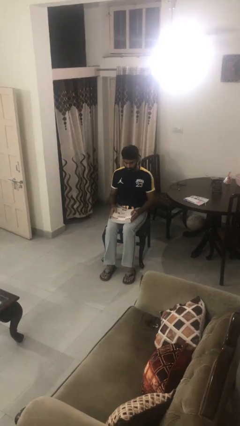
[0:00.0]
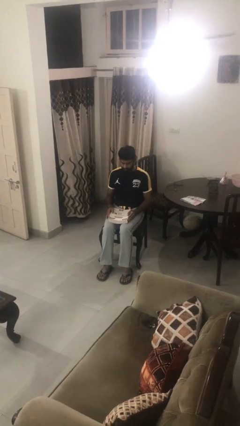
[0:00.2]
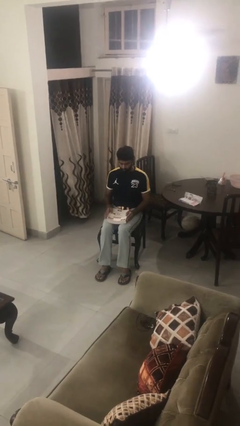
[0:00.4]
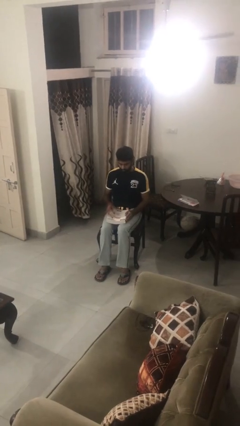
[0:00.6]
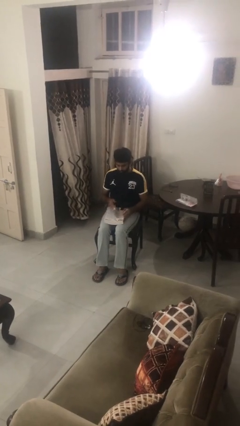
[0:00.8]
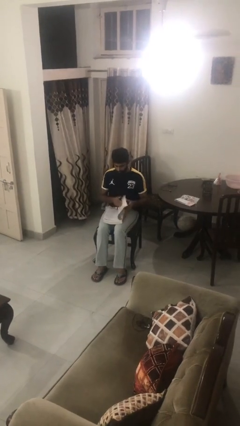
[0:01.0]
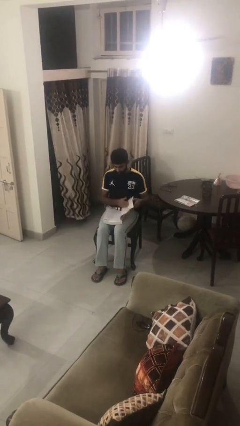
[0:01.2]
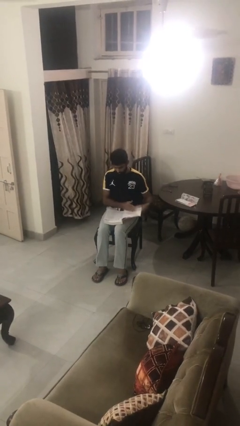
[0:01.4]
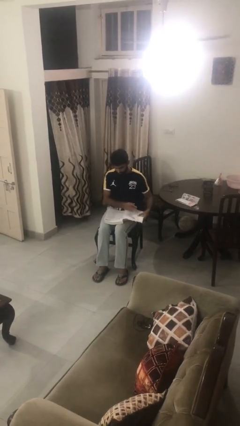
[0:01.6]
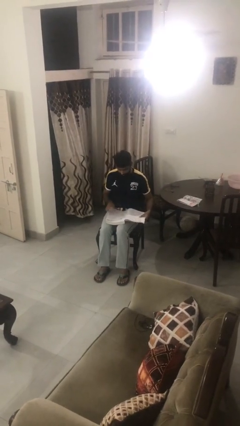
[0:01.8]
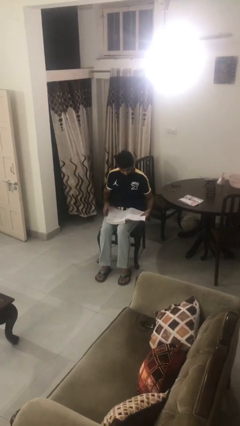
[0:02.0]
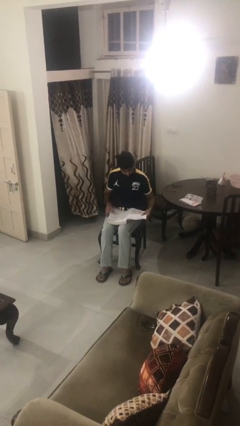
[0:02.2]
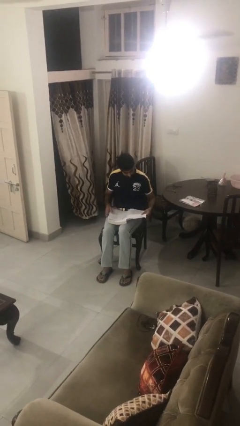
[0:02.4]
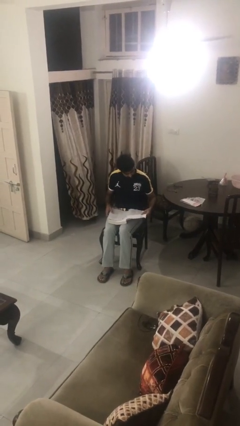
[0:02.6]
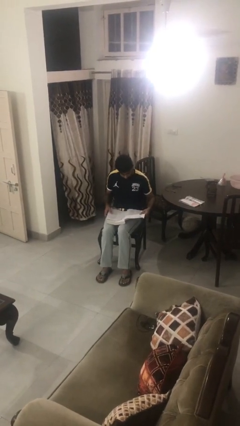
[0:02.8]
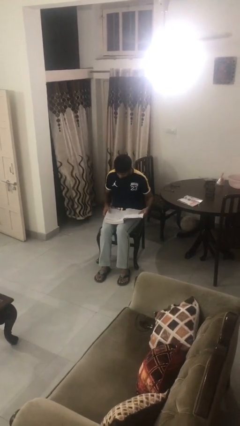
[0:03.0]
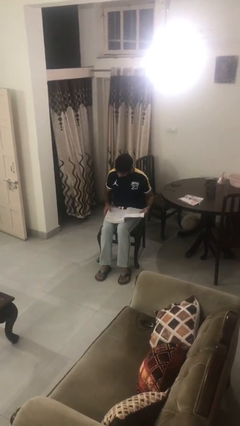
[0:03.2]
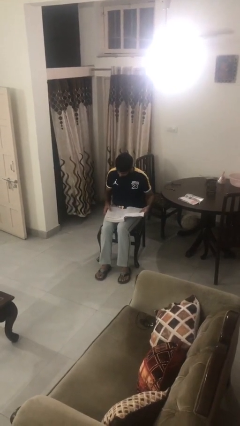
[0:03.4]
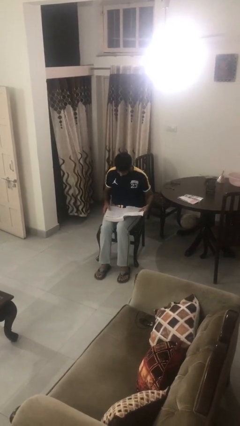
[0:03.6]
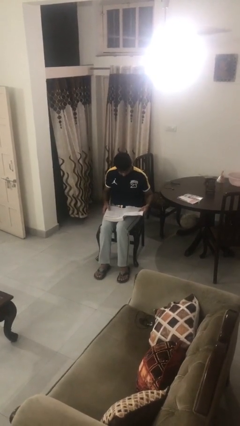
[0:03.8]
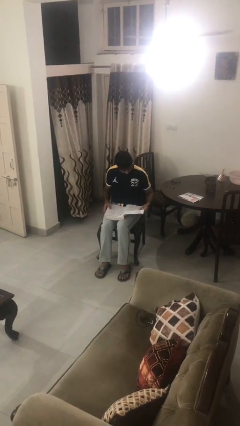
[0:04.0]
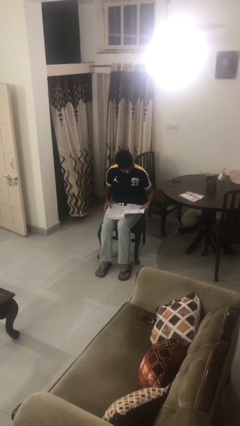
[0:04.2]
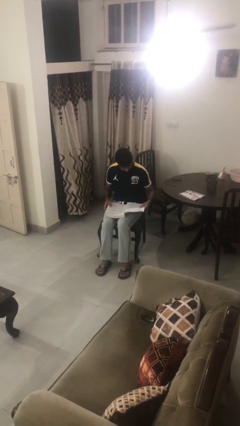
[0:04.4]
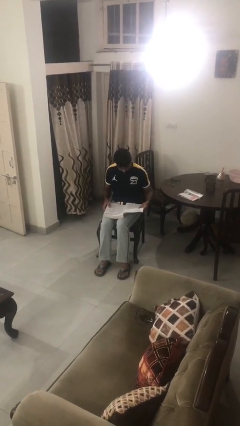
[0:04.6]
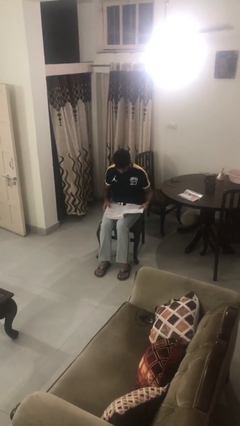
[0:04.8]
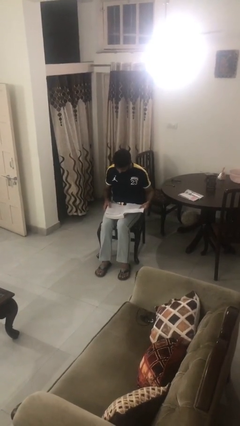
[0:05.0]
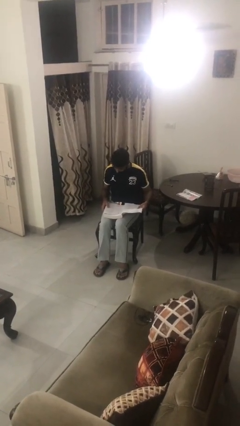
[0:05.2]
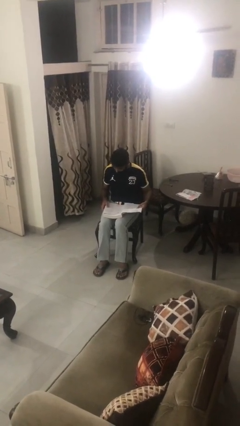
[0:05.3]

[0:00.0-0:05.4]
person reads book

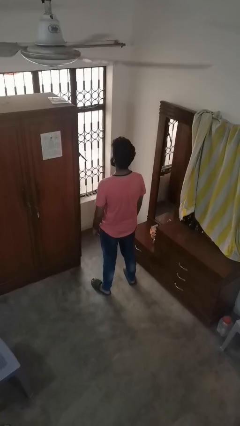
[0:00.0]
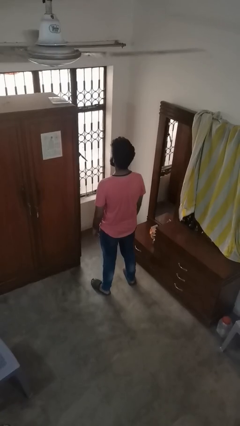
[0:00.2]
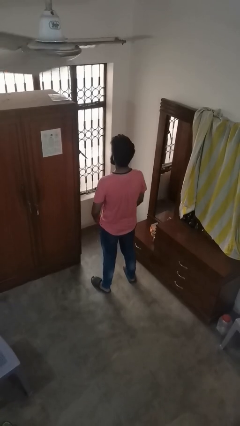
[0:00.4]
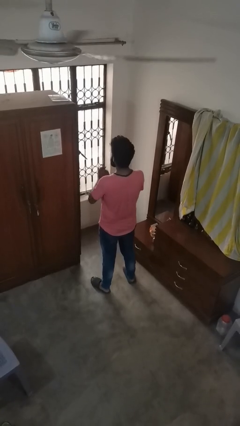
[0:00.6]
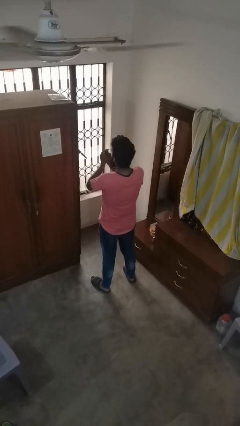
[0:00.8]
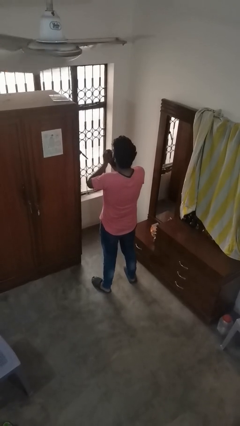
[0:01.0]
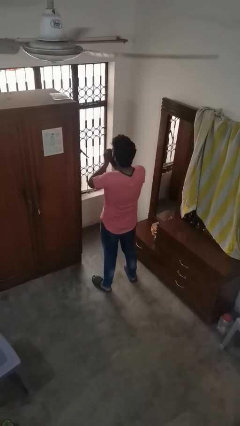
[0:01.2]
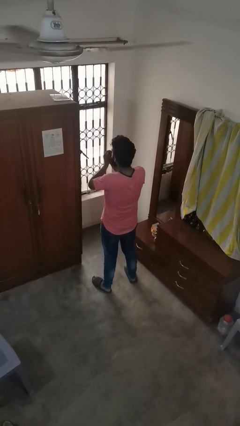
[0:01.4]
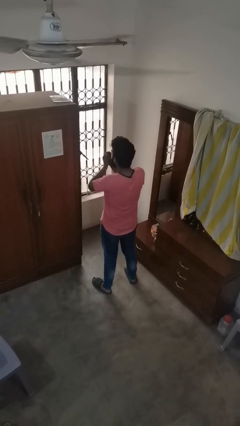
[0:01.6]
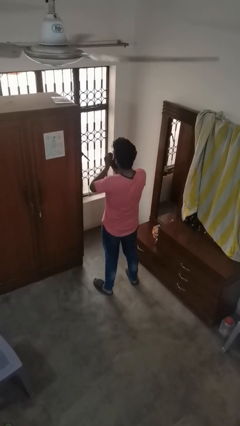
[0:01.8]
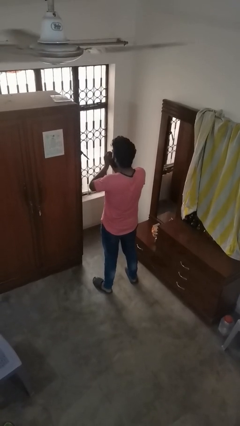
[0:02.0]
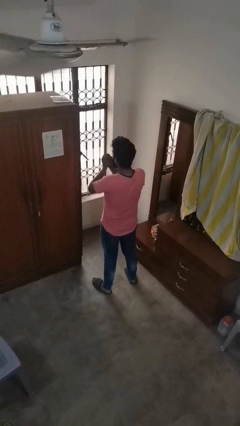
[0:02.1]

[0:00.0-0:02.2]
person blows into hands

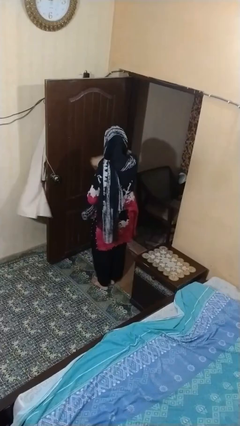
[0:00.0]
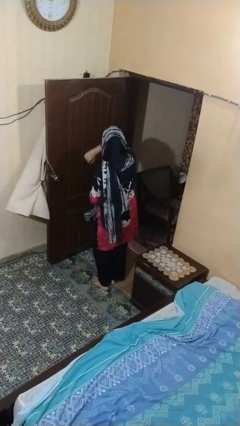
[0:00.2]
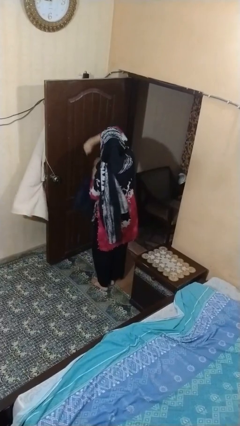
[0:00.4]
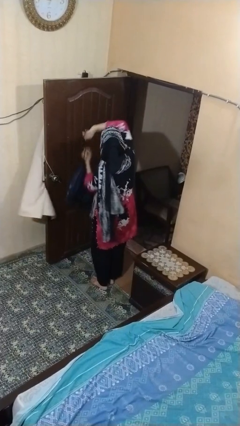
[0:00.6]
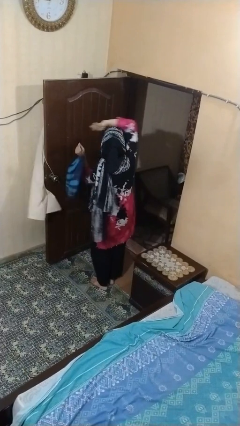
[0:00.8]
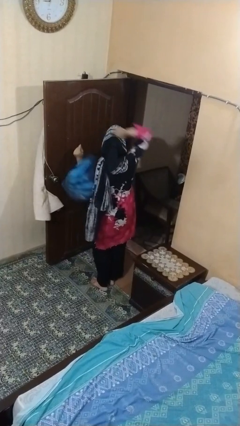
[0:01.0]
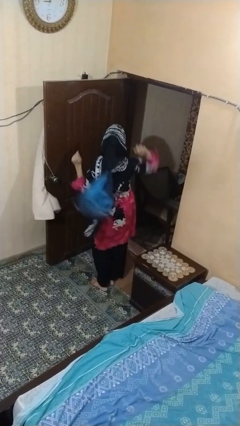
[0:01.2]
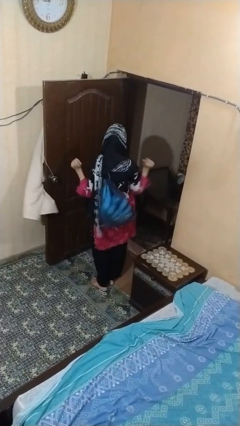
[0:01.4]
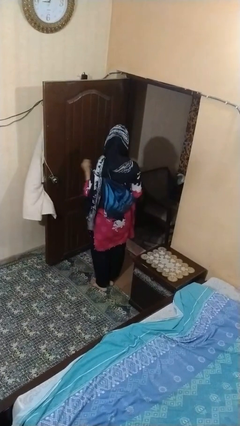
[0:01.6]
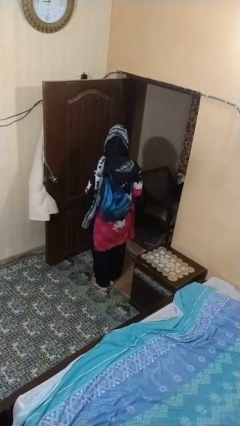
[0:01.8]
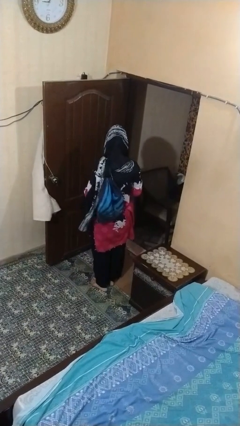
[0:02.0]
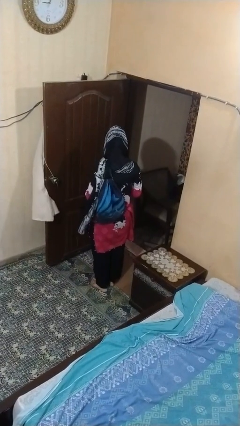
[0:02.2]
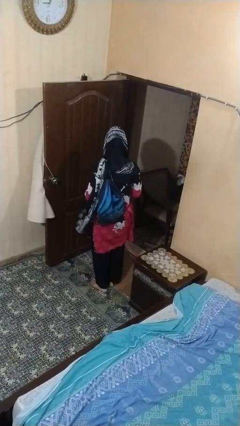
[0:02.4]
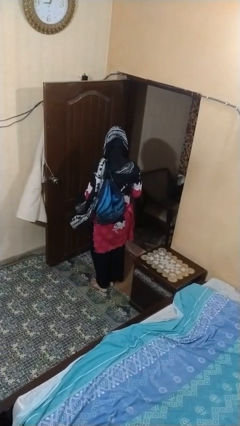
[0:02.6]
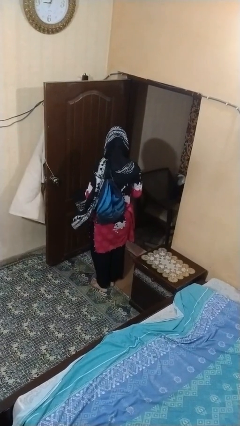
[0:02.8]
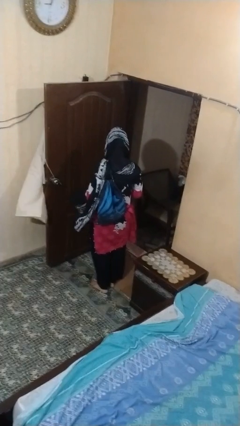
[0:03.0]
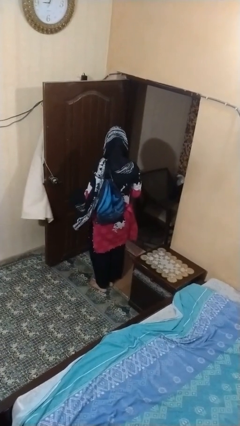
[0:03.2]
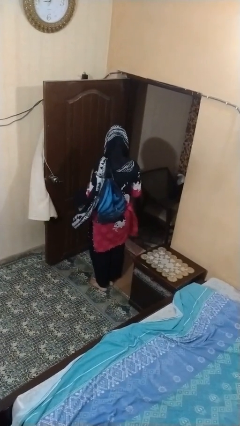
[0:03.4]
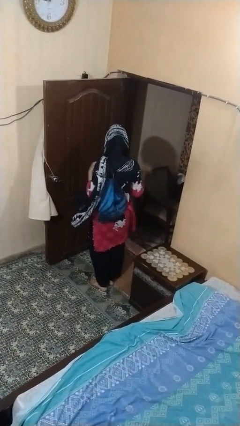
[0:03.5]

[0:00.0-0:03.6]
person puts on backpack

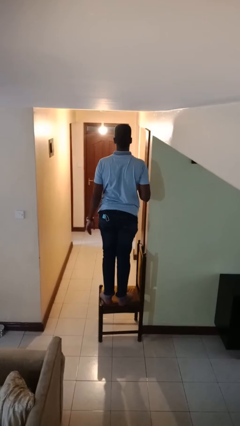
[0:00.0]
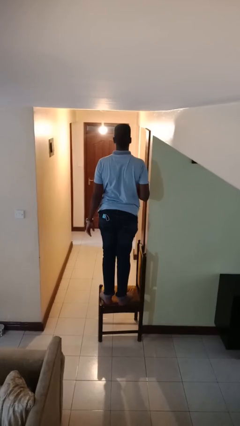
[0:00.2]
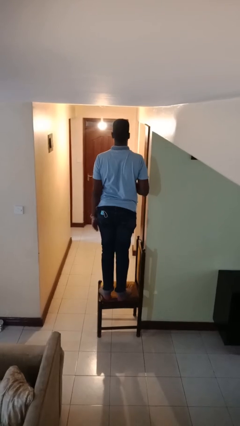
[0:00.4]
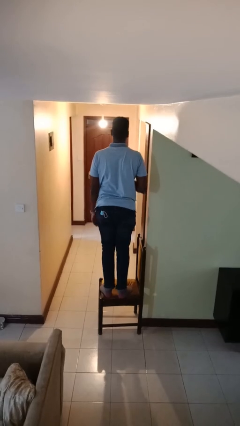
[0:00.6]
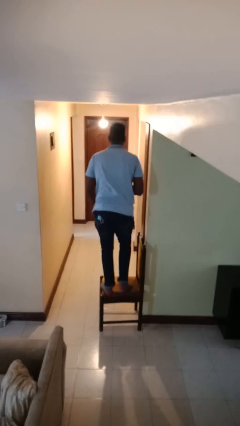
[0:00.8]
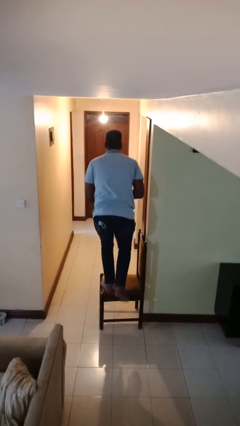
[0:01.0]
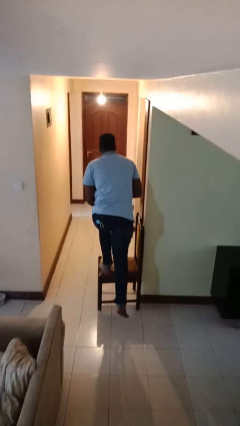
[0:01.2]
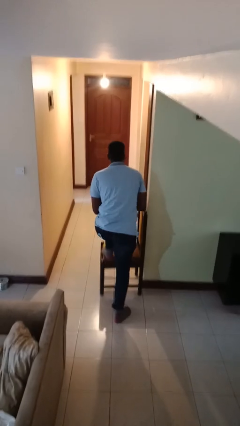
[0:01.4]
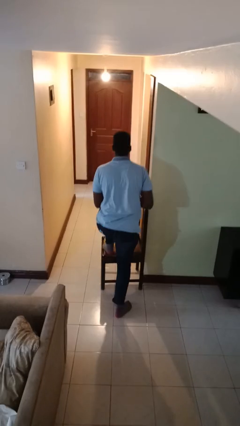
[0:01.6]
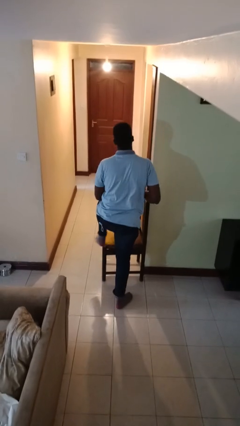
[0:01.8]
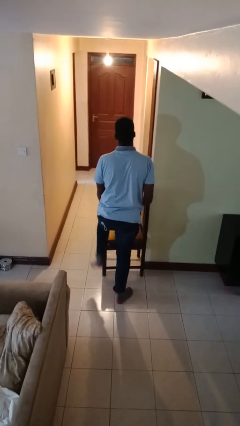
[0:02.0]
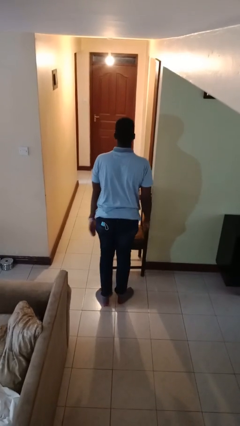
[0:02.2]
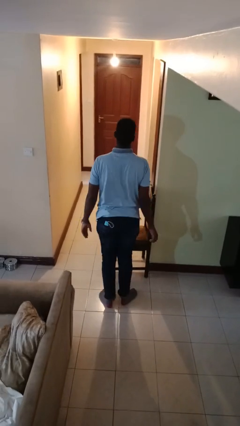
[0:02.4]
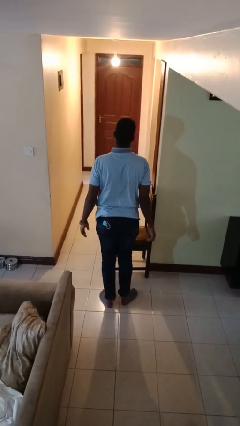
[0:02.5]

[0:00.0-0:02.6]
person climbs off chair

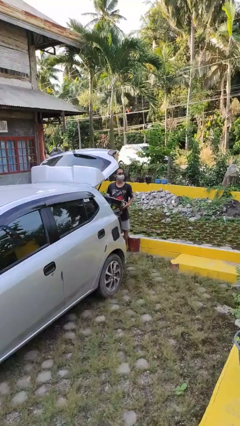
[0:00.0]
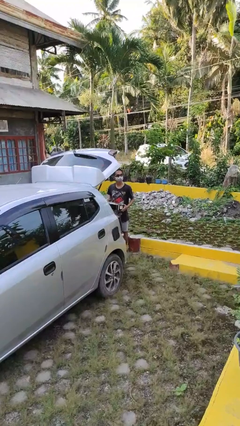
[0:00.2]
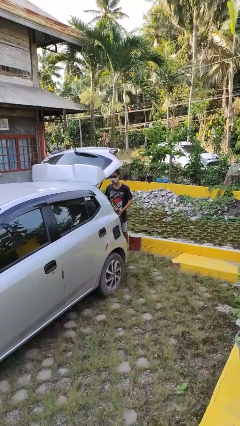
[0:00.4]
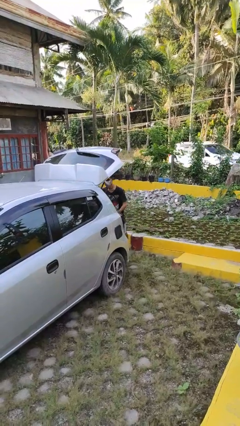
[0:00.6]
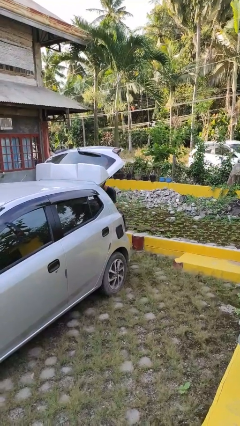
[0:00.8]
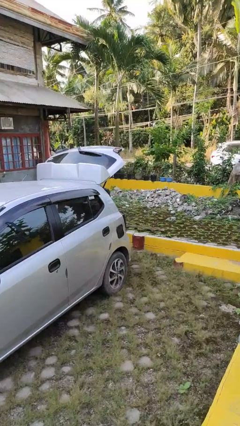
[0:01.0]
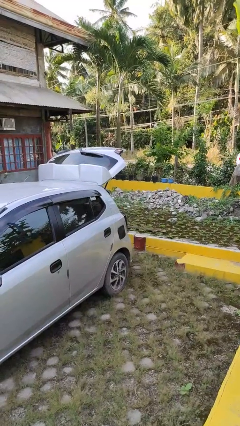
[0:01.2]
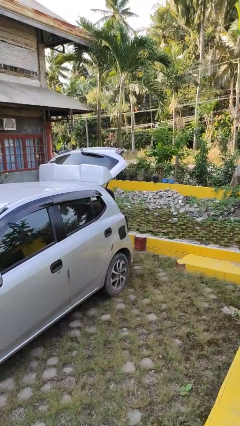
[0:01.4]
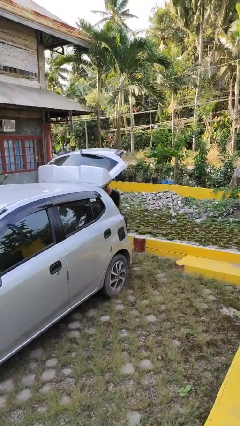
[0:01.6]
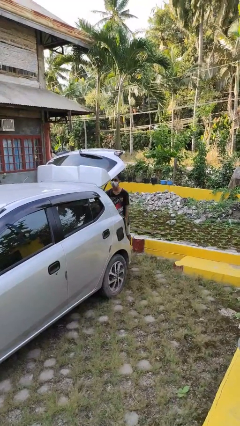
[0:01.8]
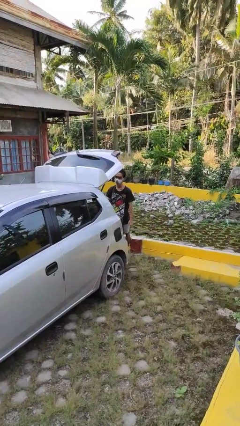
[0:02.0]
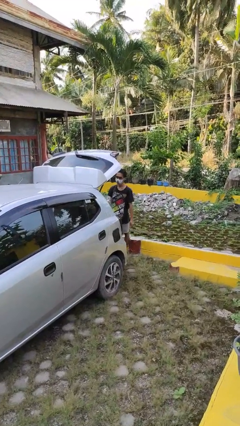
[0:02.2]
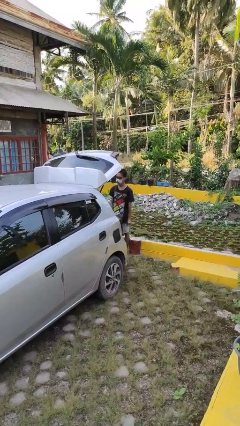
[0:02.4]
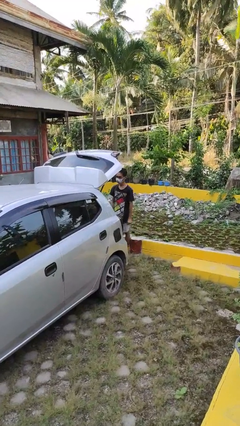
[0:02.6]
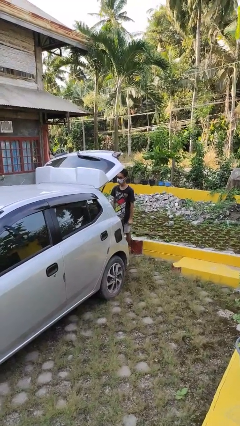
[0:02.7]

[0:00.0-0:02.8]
person loads car

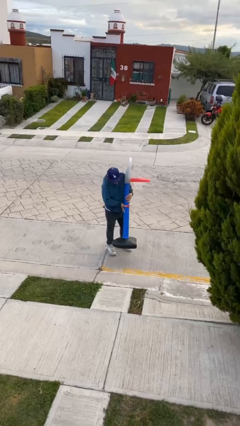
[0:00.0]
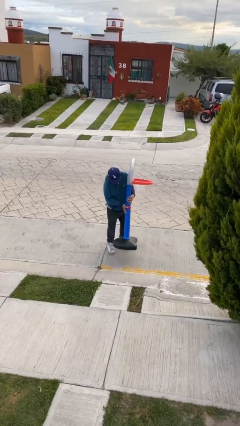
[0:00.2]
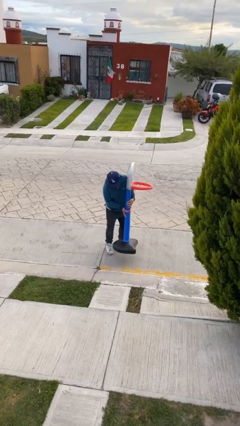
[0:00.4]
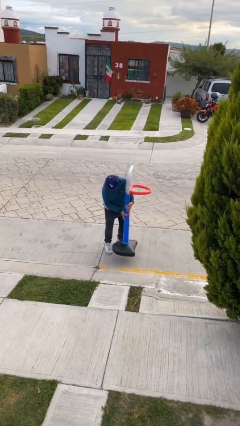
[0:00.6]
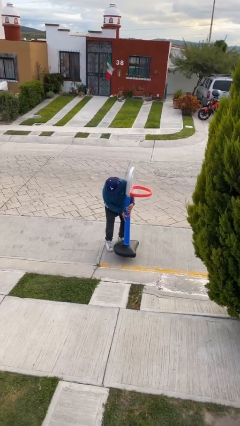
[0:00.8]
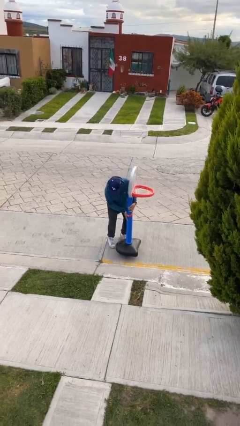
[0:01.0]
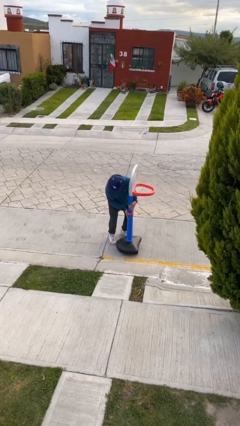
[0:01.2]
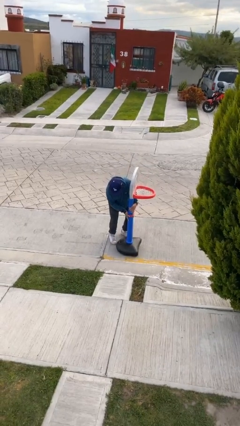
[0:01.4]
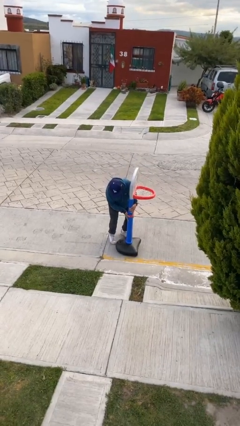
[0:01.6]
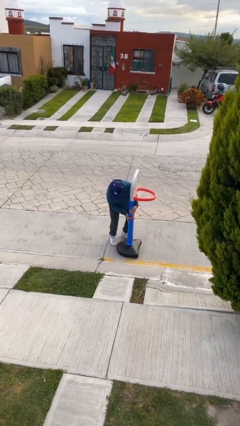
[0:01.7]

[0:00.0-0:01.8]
person puts down object on floor
